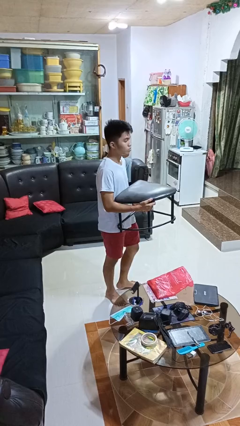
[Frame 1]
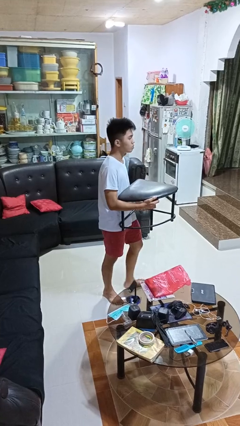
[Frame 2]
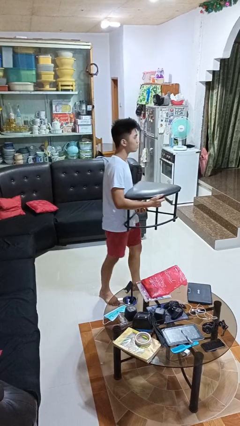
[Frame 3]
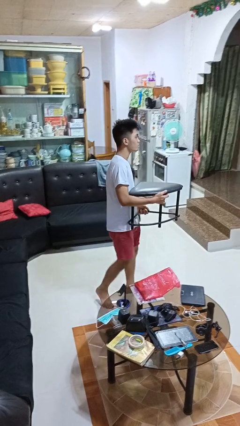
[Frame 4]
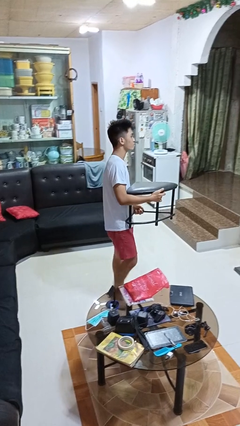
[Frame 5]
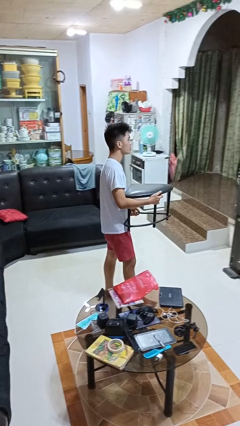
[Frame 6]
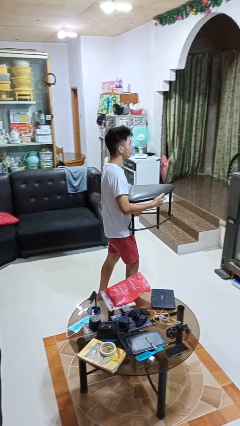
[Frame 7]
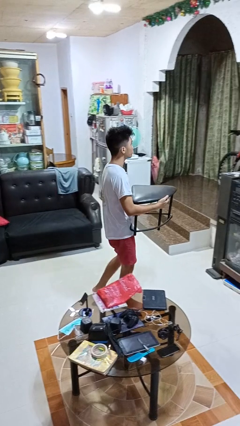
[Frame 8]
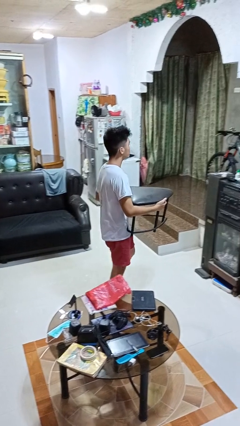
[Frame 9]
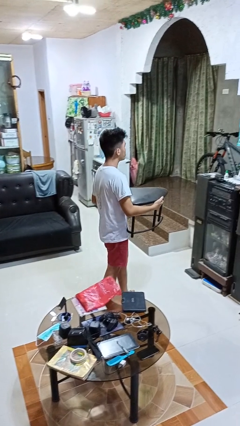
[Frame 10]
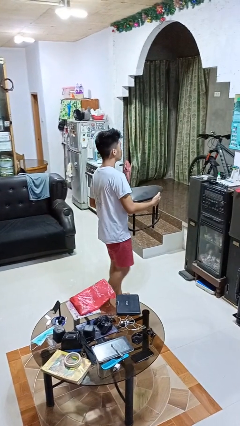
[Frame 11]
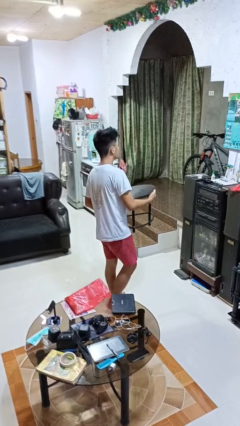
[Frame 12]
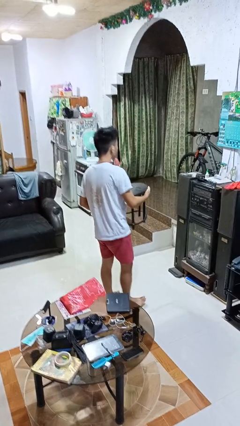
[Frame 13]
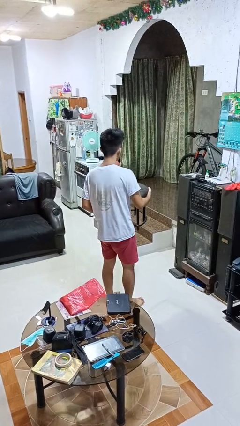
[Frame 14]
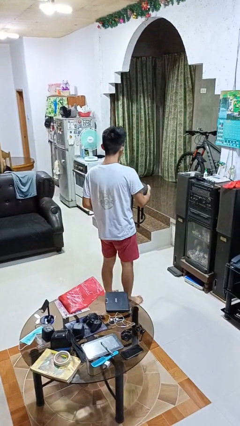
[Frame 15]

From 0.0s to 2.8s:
person carries furniture

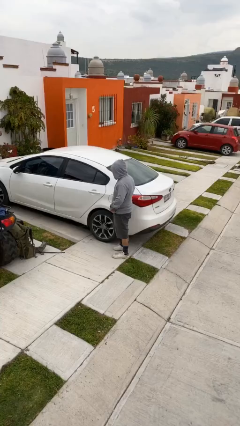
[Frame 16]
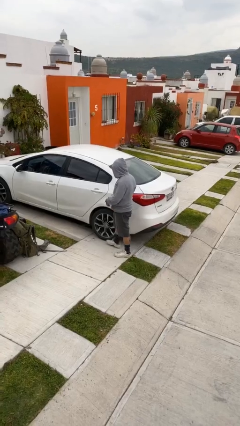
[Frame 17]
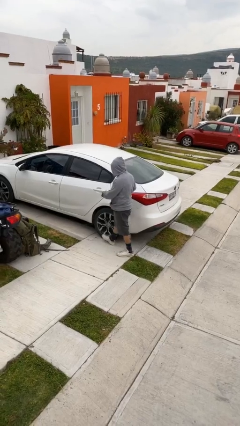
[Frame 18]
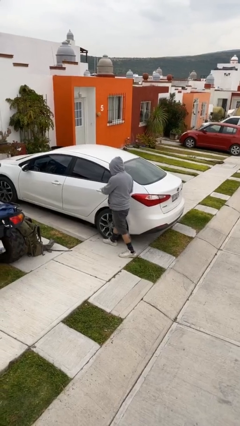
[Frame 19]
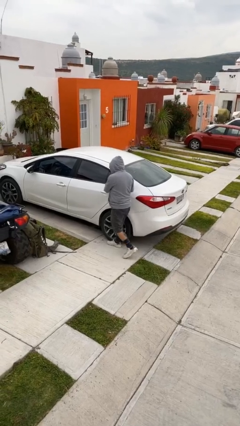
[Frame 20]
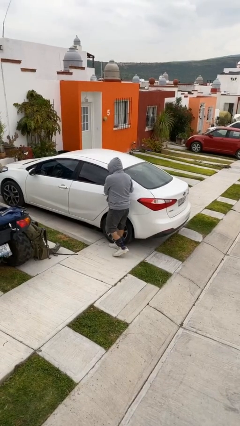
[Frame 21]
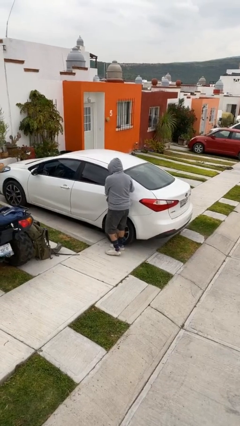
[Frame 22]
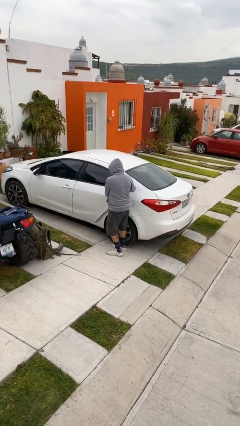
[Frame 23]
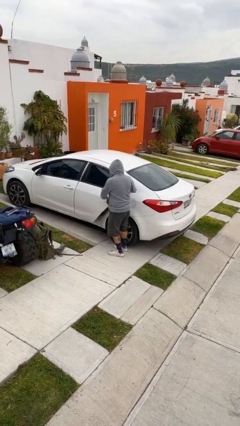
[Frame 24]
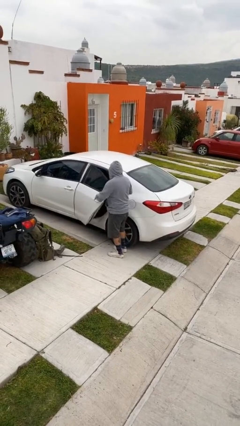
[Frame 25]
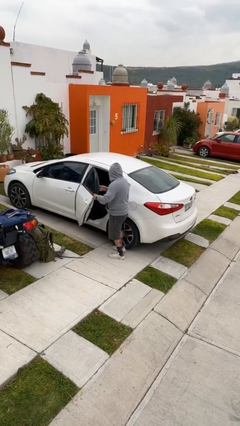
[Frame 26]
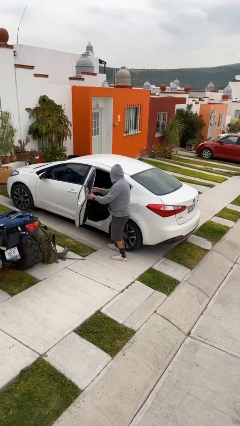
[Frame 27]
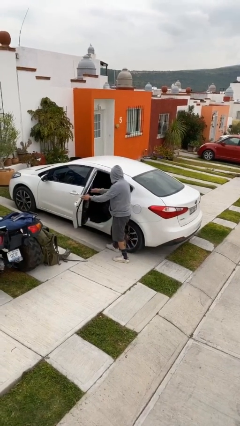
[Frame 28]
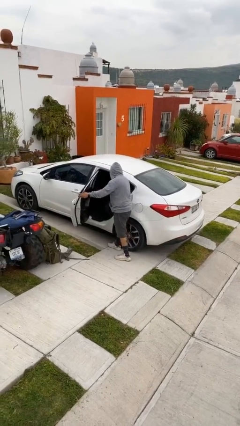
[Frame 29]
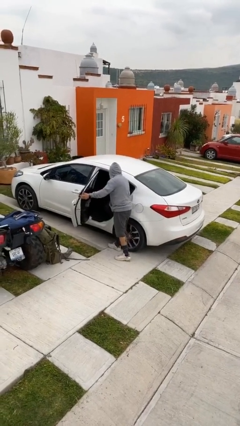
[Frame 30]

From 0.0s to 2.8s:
person opens car door

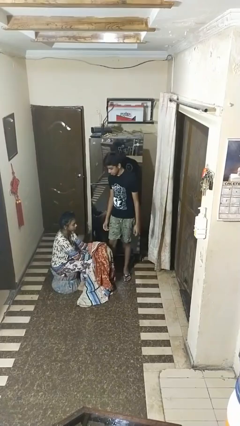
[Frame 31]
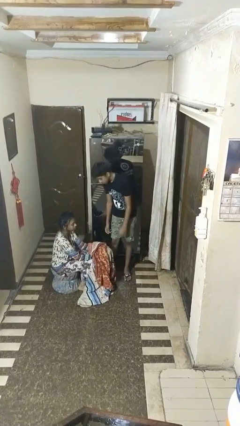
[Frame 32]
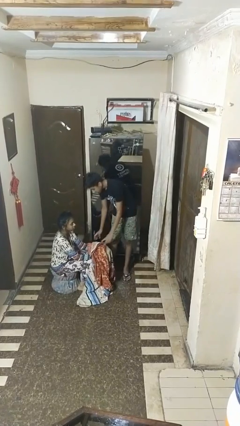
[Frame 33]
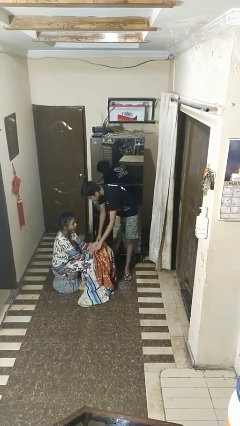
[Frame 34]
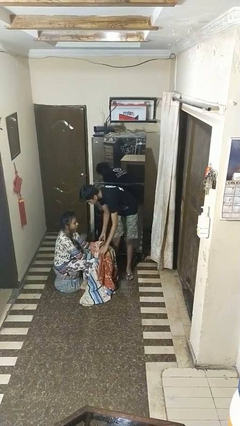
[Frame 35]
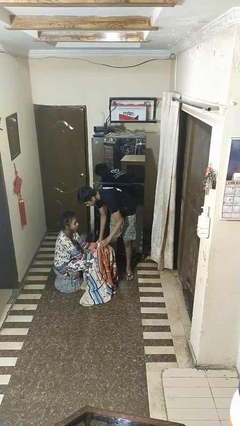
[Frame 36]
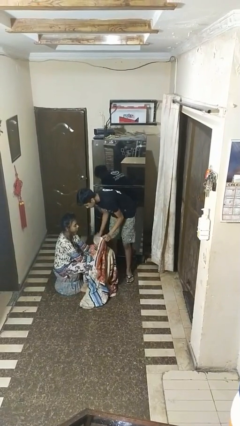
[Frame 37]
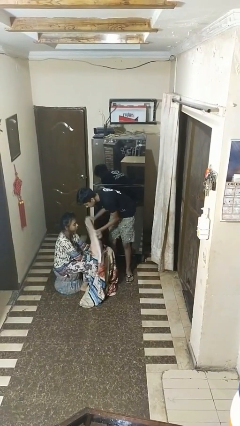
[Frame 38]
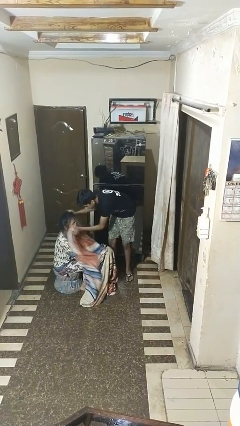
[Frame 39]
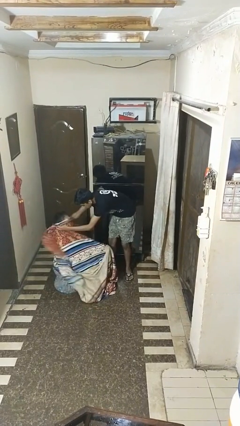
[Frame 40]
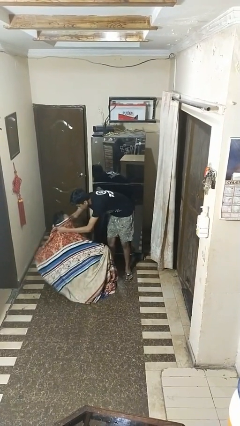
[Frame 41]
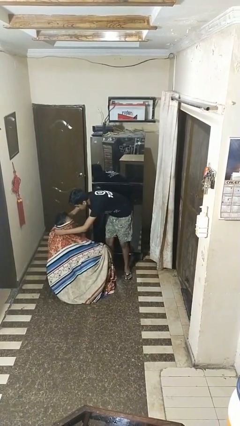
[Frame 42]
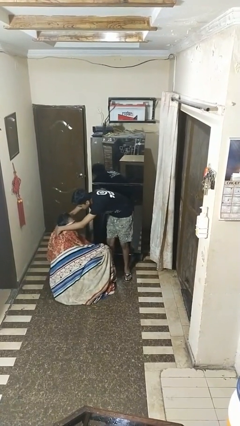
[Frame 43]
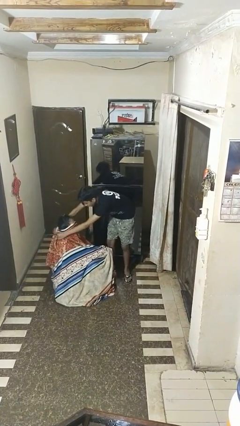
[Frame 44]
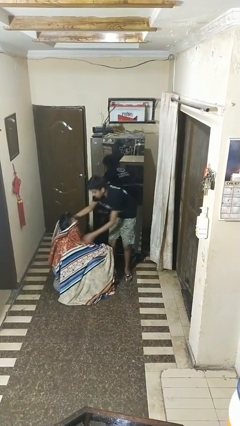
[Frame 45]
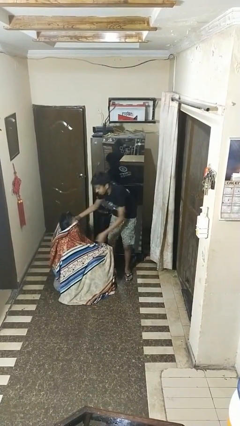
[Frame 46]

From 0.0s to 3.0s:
person covers friend with blanket

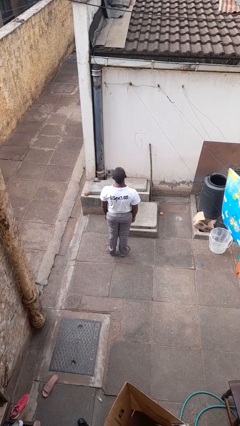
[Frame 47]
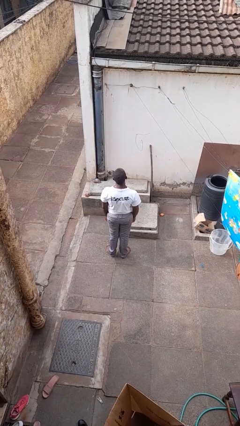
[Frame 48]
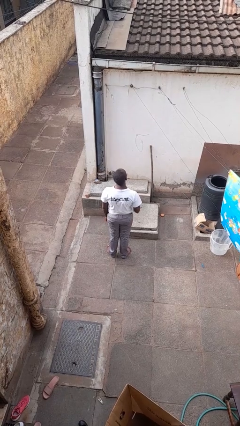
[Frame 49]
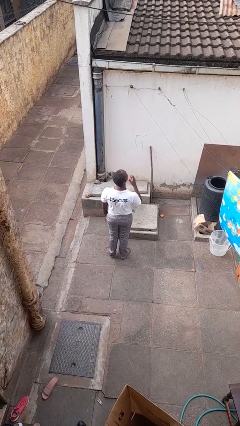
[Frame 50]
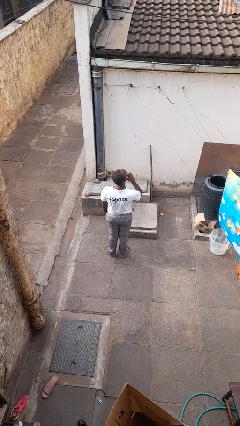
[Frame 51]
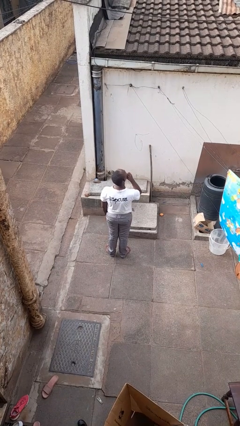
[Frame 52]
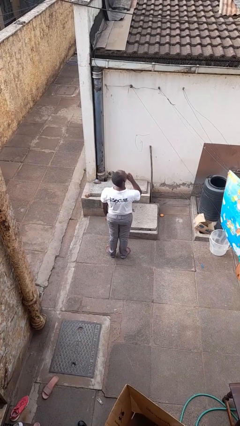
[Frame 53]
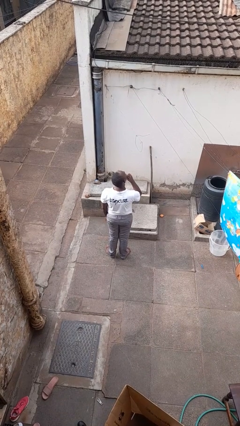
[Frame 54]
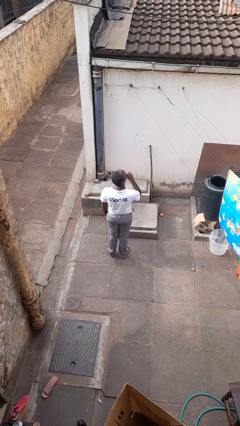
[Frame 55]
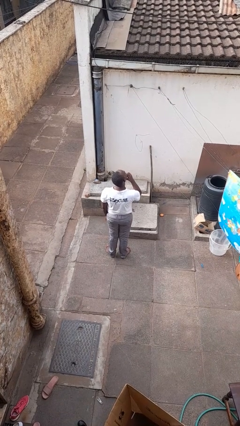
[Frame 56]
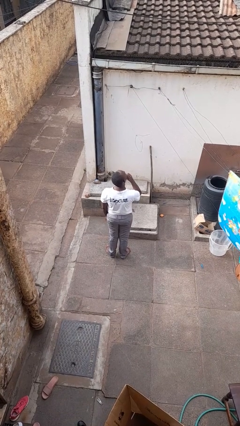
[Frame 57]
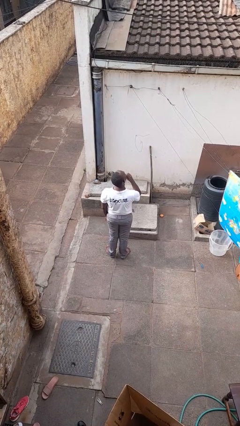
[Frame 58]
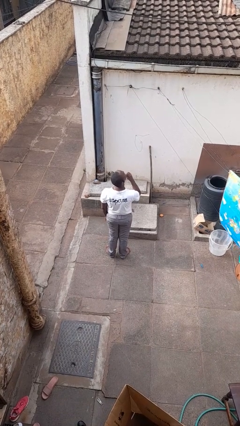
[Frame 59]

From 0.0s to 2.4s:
person strokes chin

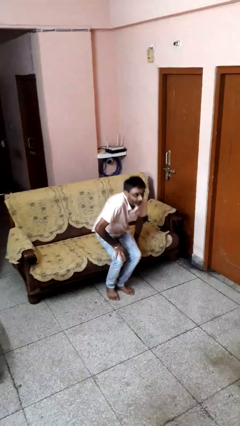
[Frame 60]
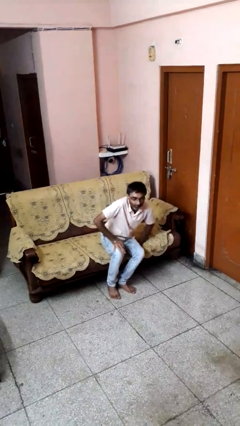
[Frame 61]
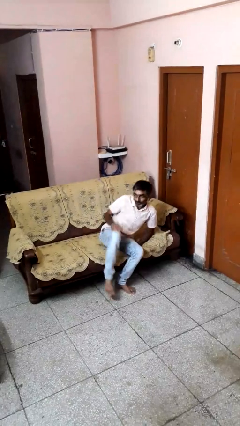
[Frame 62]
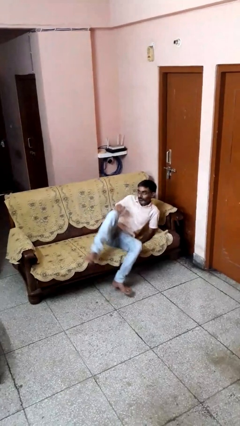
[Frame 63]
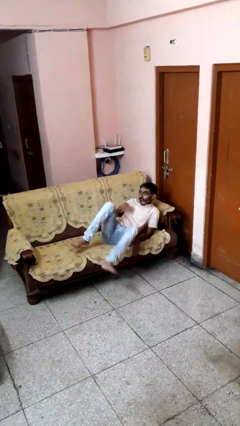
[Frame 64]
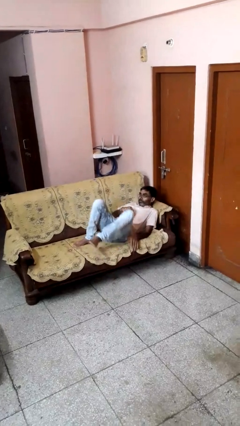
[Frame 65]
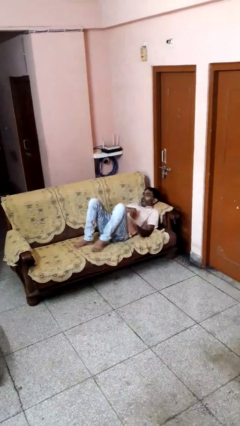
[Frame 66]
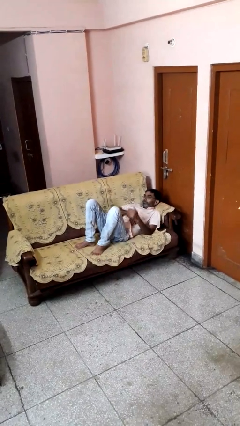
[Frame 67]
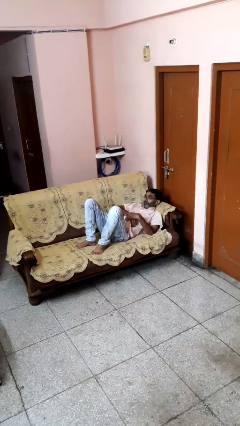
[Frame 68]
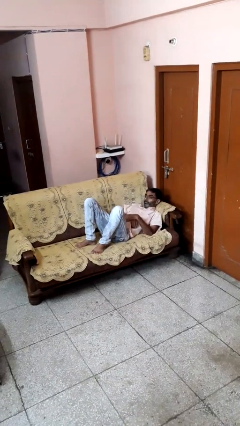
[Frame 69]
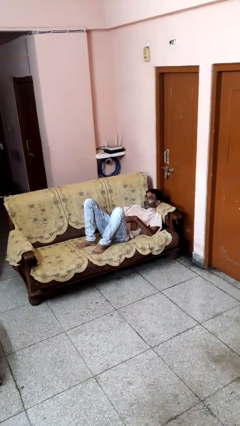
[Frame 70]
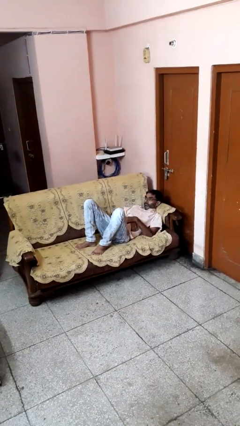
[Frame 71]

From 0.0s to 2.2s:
person lies down on couch

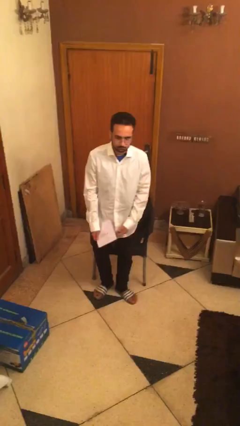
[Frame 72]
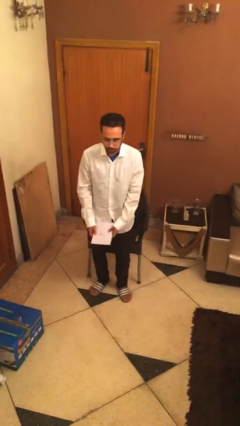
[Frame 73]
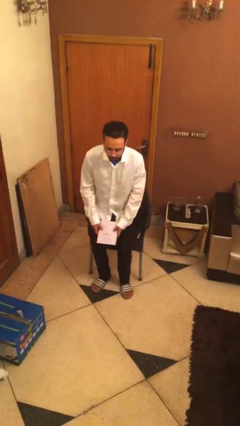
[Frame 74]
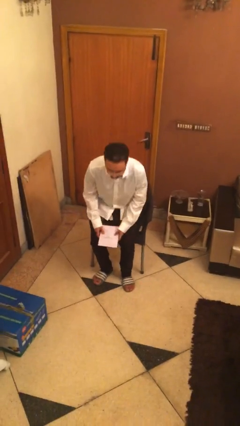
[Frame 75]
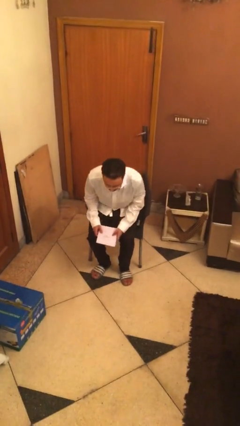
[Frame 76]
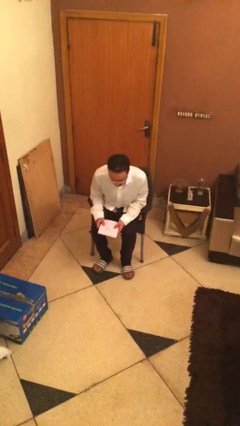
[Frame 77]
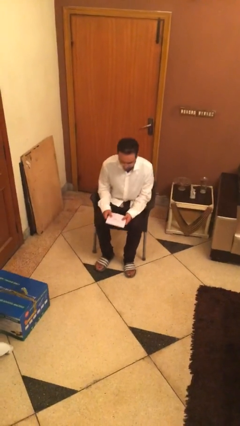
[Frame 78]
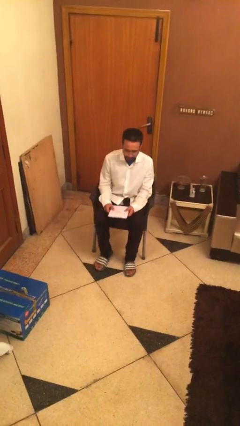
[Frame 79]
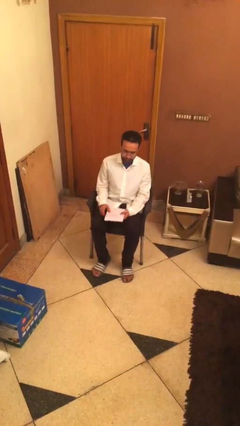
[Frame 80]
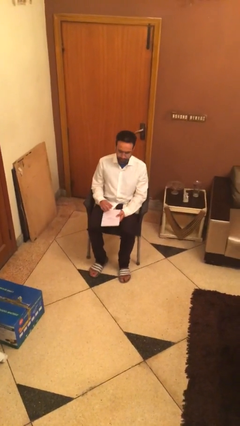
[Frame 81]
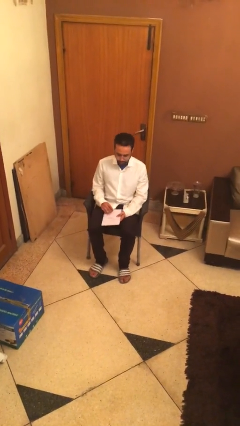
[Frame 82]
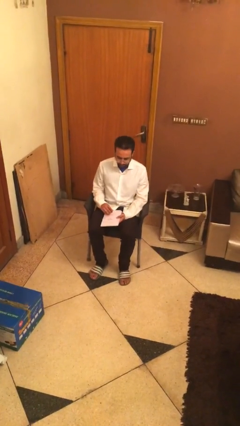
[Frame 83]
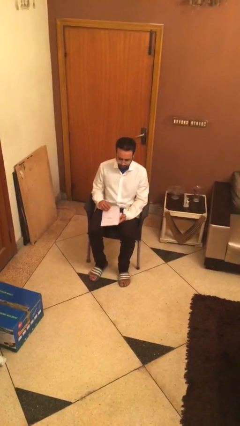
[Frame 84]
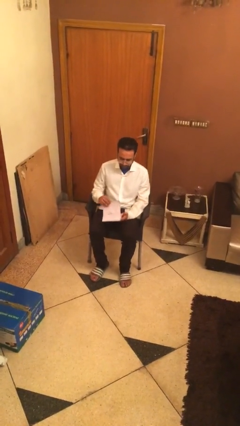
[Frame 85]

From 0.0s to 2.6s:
person sits down

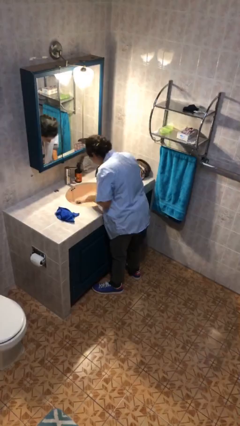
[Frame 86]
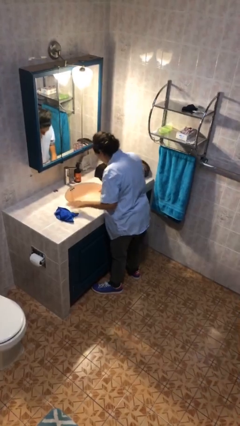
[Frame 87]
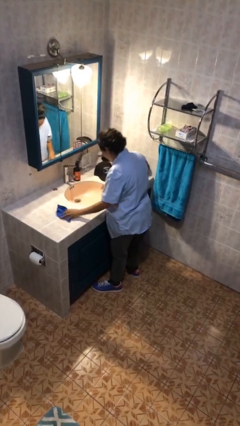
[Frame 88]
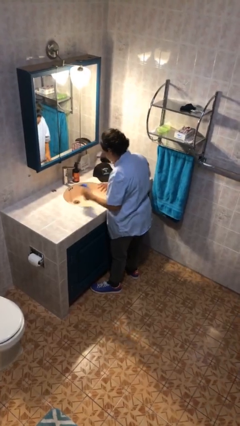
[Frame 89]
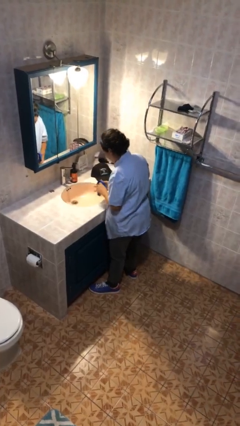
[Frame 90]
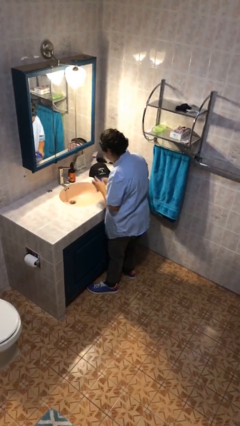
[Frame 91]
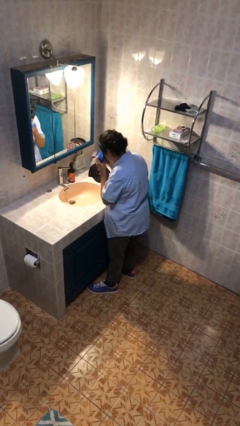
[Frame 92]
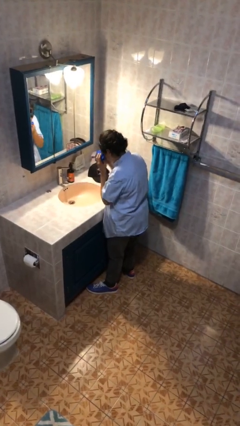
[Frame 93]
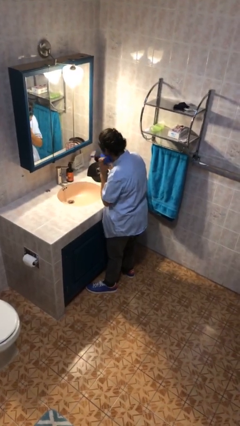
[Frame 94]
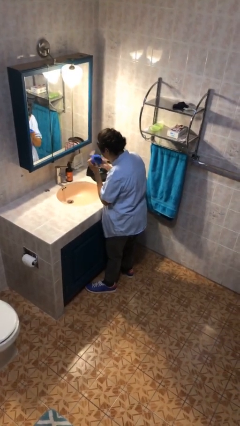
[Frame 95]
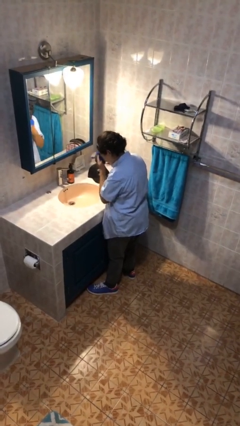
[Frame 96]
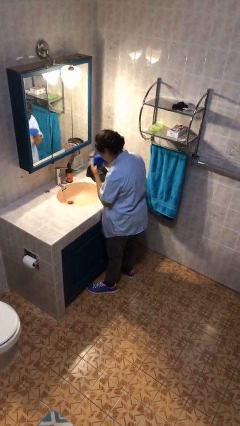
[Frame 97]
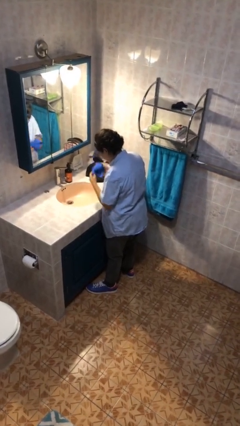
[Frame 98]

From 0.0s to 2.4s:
person dries face with towel
